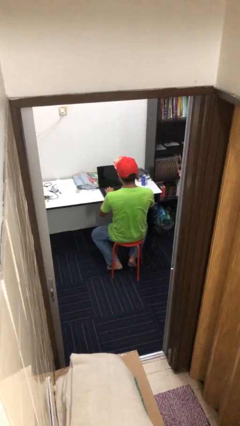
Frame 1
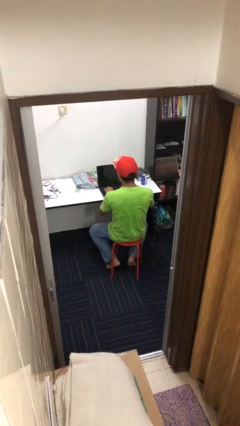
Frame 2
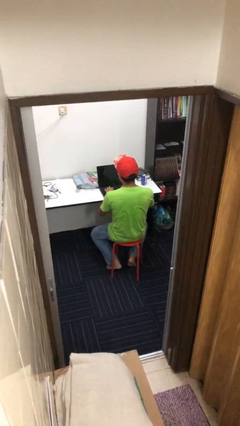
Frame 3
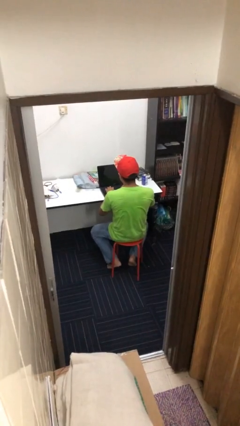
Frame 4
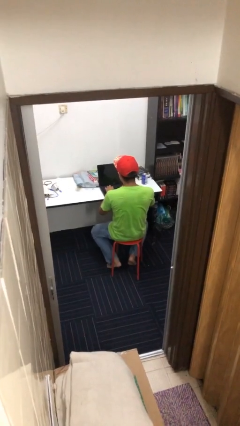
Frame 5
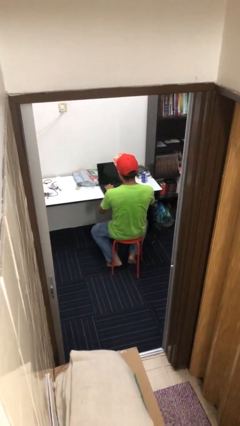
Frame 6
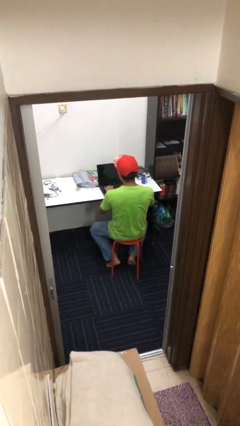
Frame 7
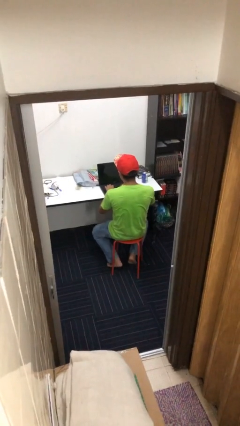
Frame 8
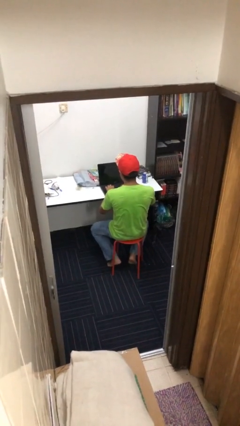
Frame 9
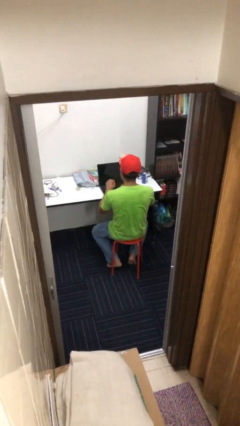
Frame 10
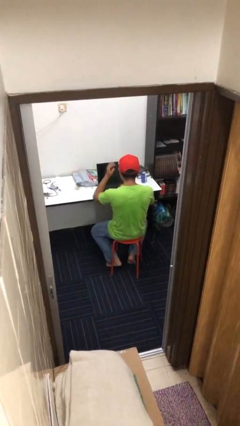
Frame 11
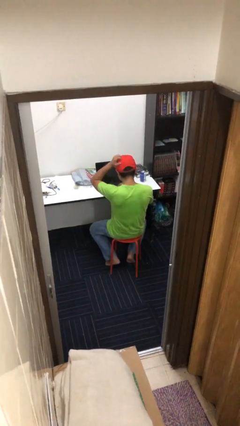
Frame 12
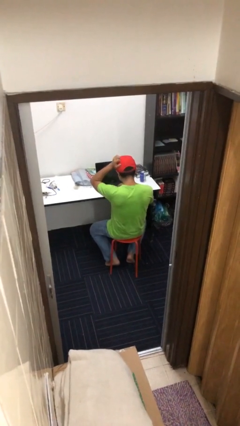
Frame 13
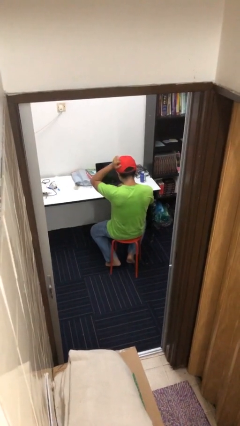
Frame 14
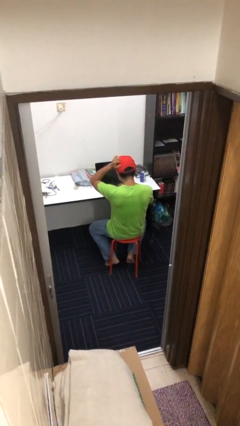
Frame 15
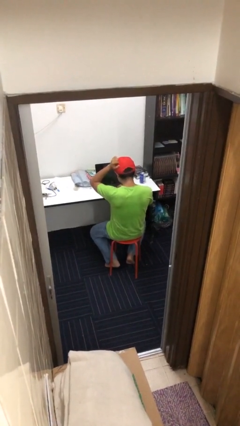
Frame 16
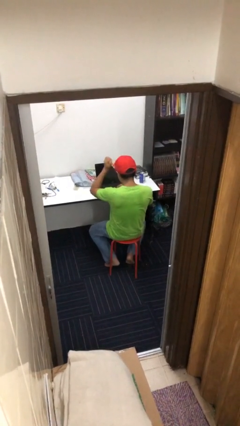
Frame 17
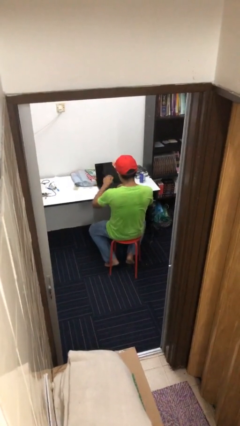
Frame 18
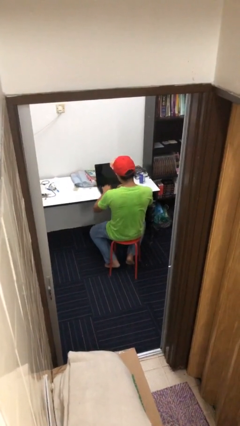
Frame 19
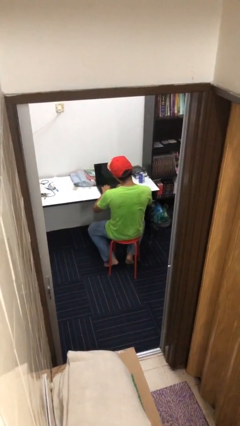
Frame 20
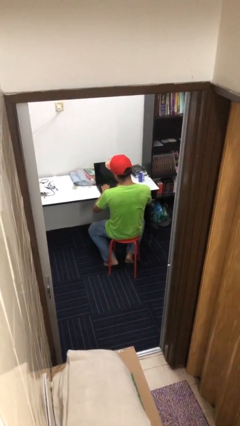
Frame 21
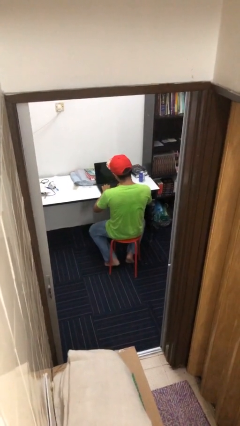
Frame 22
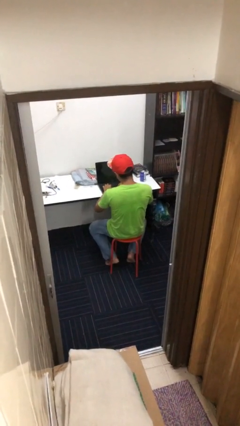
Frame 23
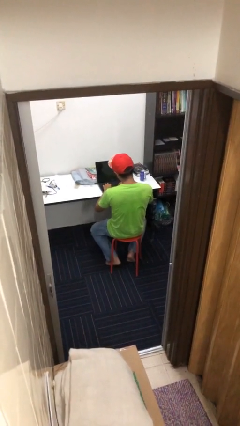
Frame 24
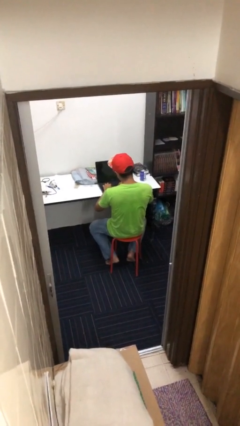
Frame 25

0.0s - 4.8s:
person interacts with laptop

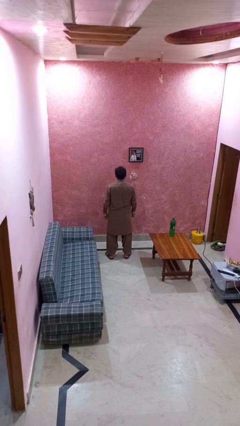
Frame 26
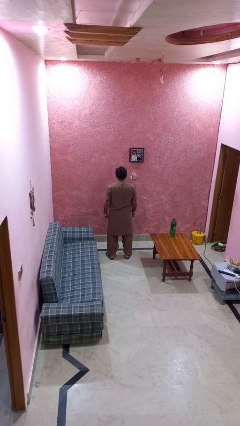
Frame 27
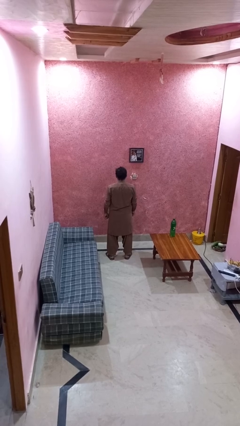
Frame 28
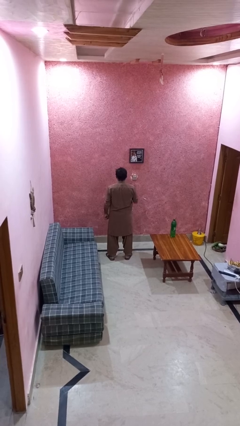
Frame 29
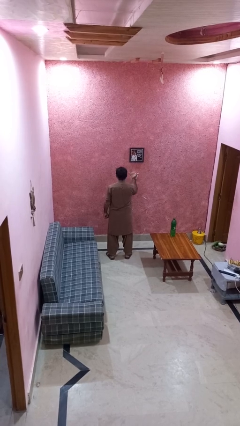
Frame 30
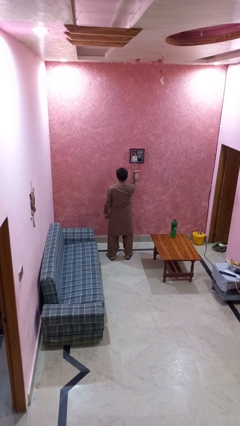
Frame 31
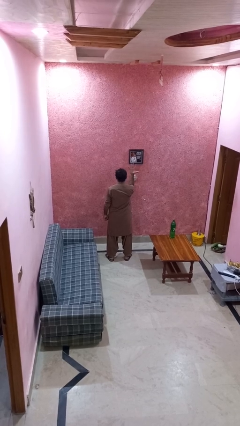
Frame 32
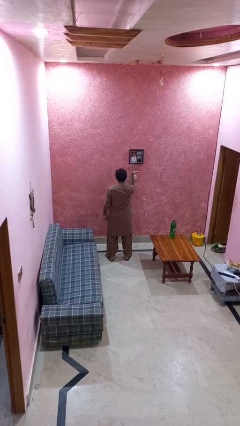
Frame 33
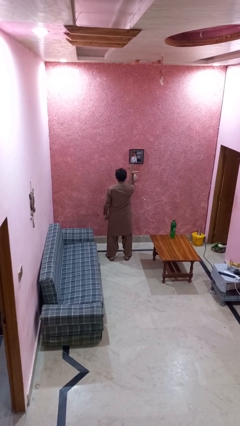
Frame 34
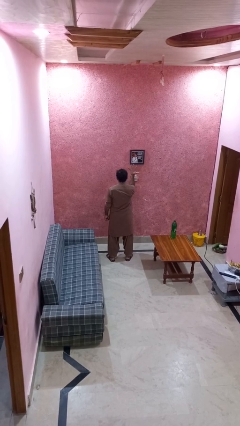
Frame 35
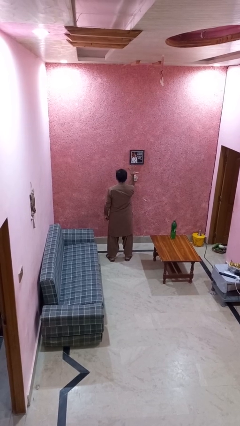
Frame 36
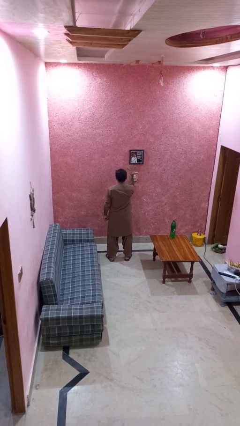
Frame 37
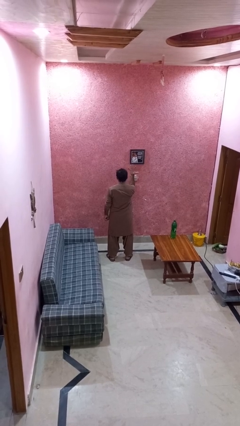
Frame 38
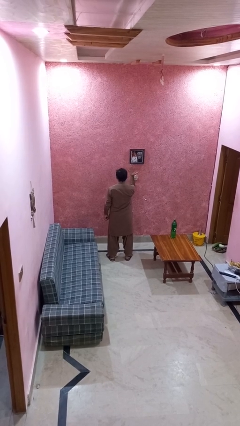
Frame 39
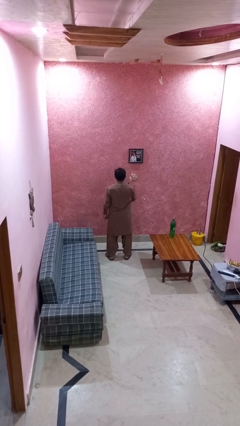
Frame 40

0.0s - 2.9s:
person gestures number five

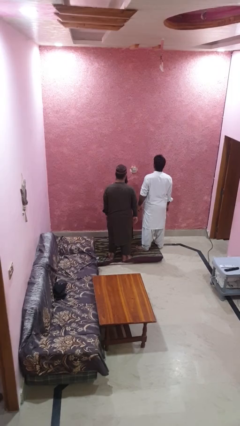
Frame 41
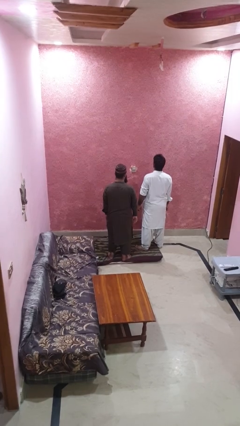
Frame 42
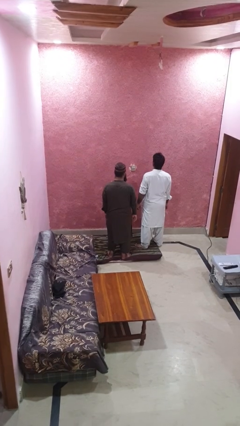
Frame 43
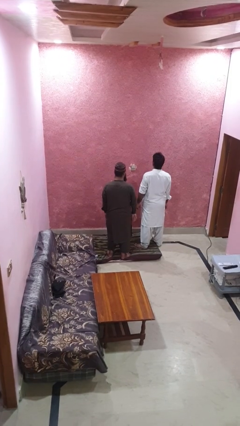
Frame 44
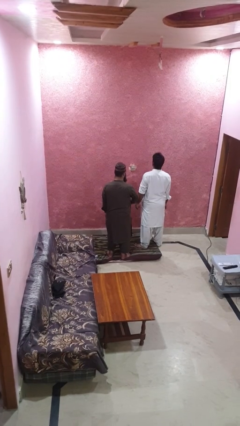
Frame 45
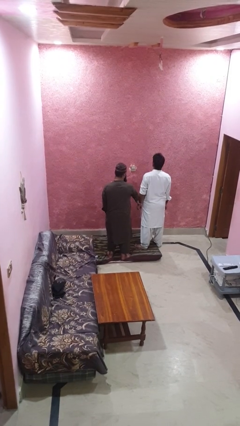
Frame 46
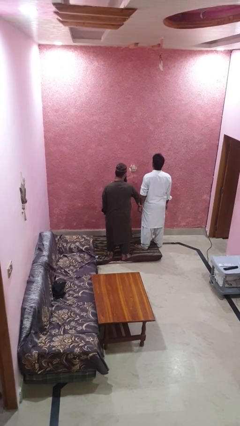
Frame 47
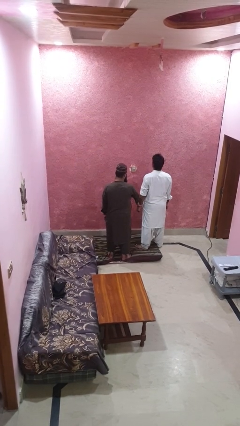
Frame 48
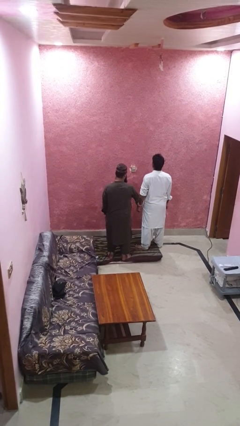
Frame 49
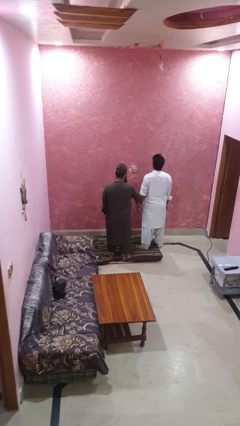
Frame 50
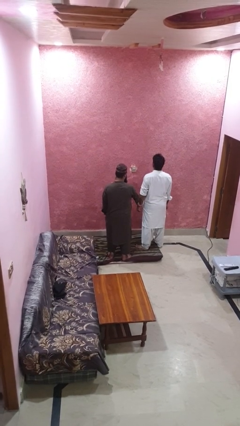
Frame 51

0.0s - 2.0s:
person grabs person by forearm

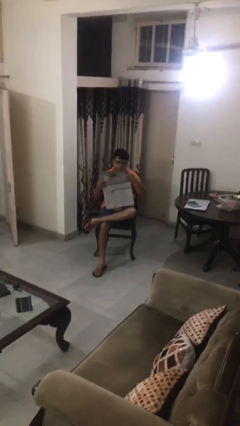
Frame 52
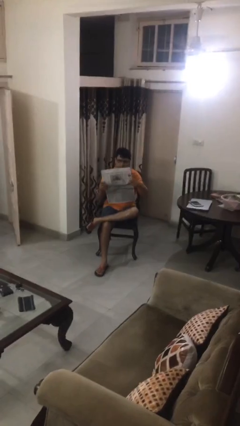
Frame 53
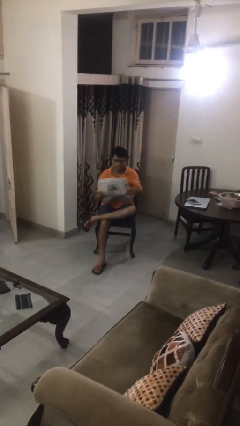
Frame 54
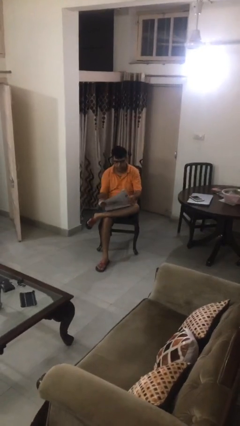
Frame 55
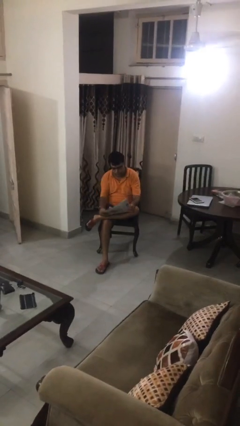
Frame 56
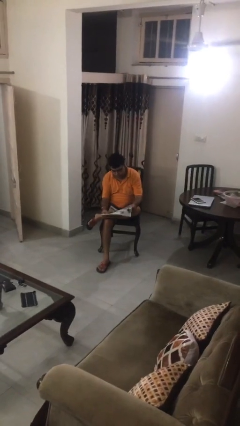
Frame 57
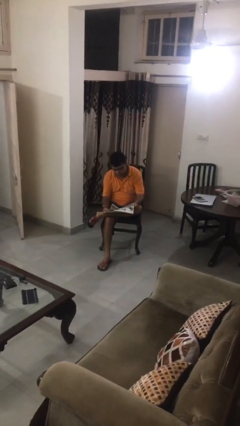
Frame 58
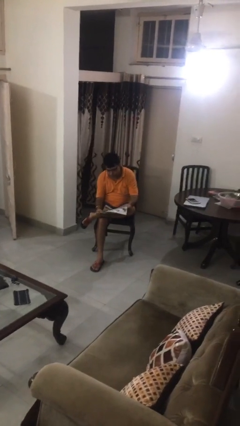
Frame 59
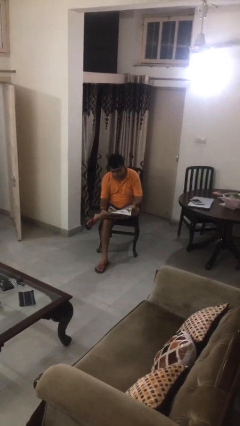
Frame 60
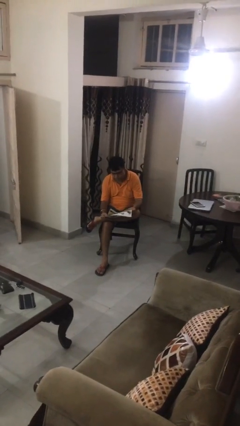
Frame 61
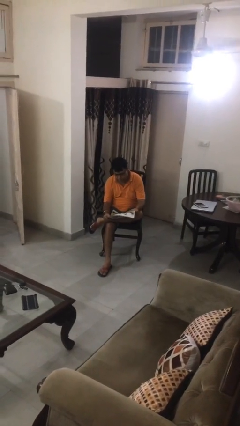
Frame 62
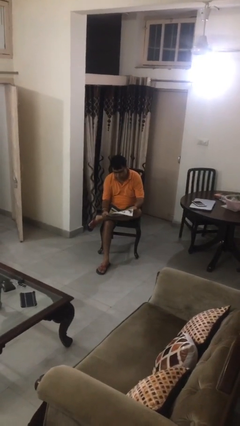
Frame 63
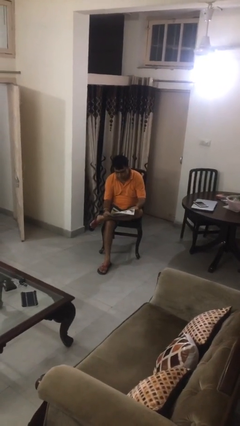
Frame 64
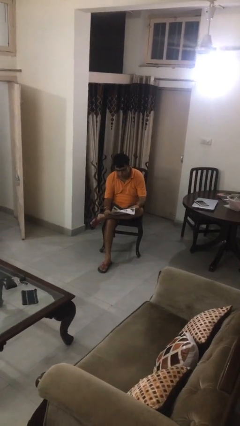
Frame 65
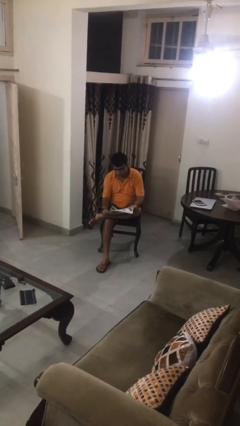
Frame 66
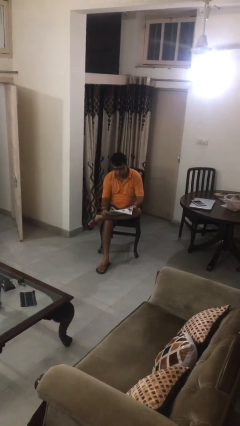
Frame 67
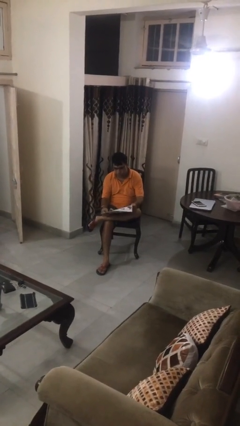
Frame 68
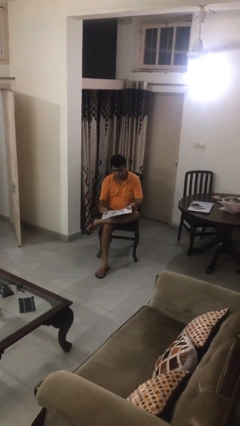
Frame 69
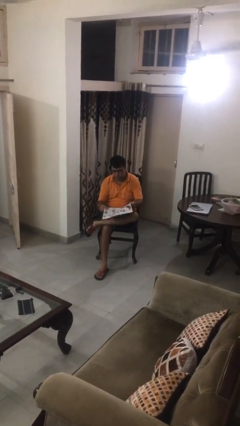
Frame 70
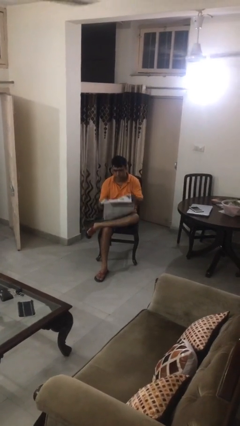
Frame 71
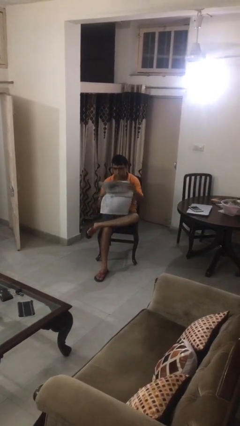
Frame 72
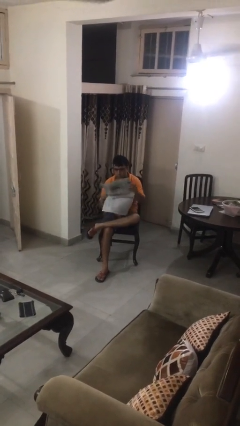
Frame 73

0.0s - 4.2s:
person reads newspaper

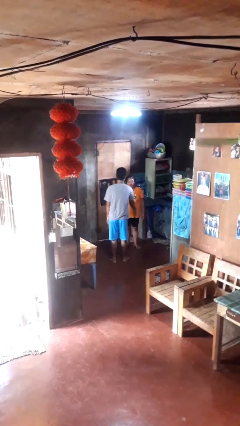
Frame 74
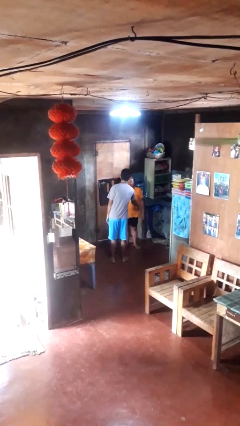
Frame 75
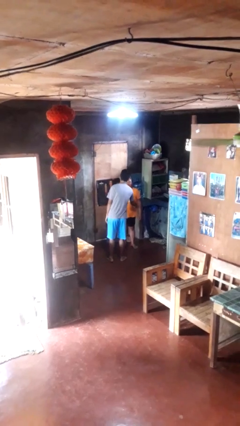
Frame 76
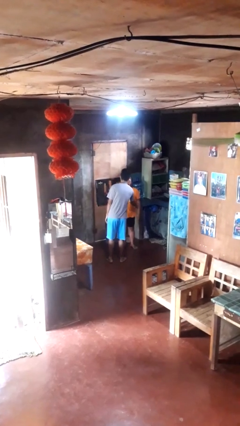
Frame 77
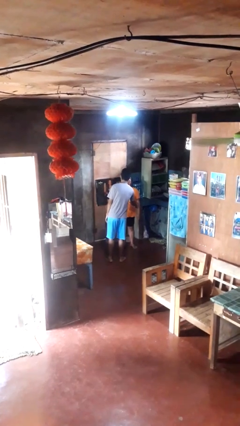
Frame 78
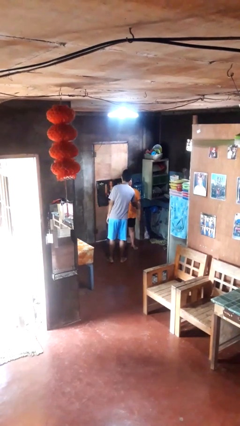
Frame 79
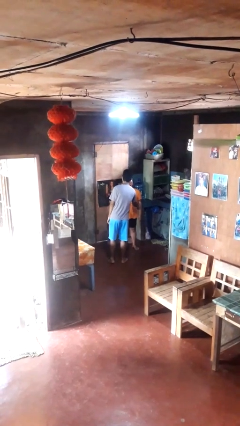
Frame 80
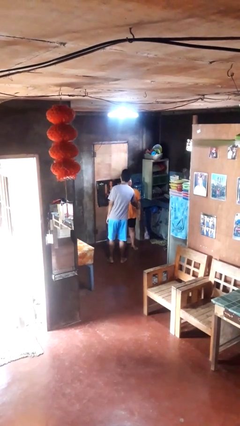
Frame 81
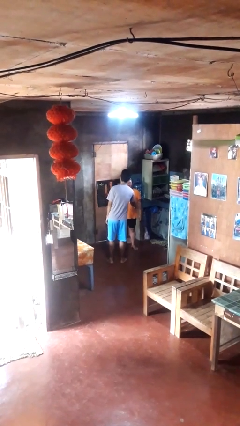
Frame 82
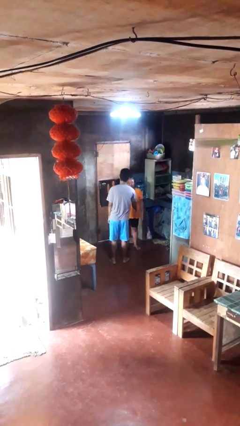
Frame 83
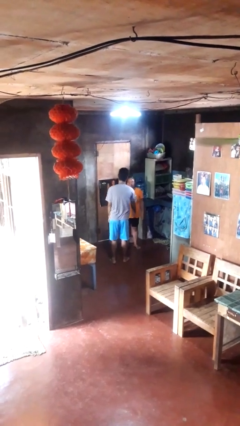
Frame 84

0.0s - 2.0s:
person tickles person

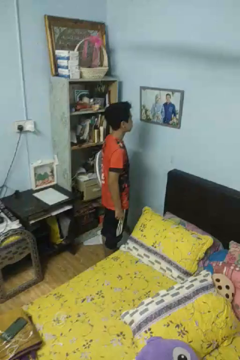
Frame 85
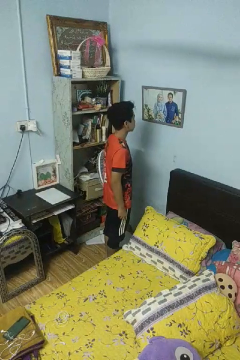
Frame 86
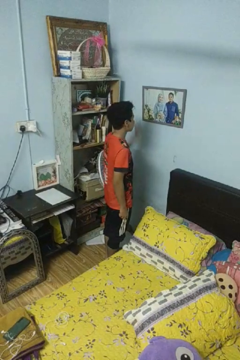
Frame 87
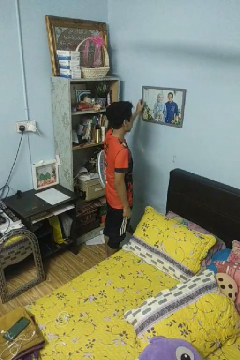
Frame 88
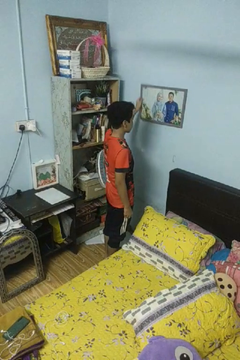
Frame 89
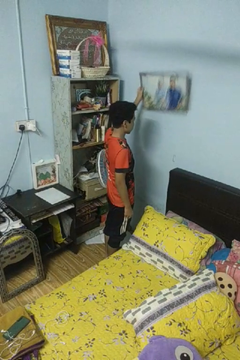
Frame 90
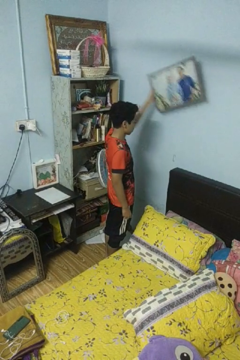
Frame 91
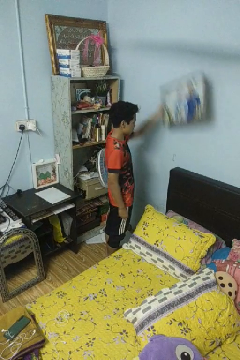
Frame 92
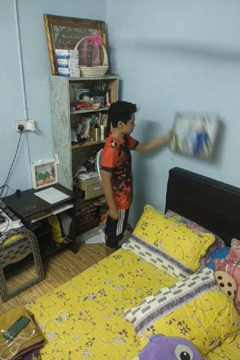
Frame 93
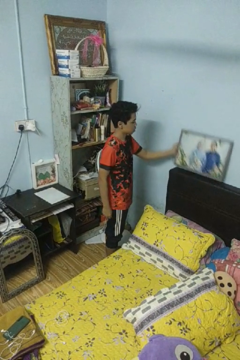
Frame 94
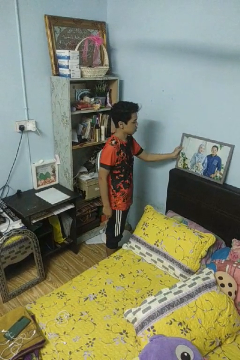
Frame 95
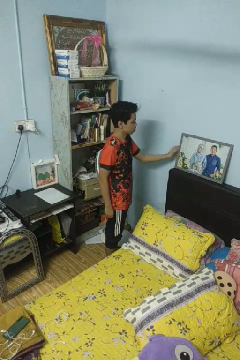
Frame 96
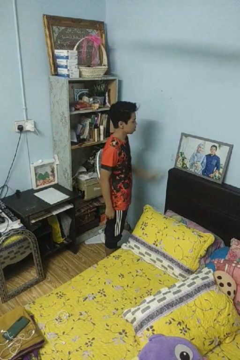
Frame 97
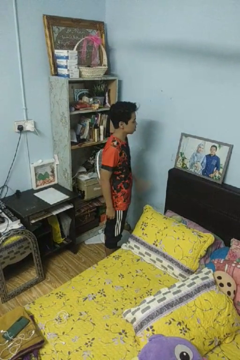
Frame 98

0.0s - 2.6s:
person takes down picture frame
